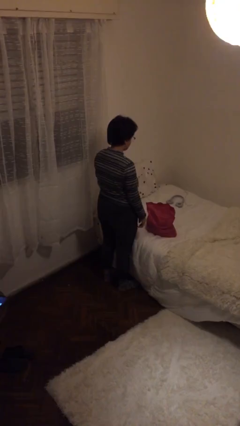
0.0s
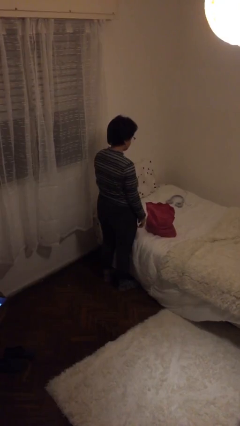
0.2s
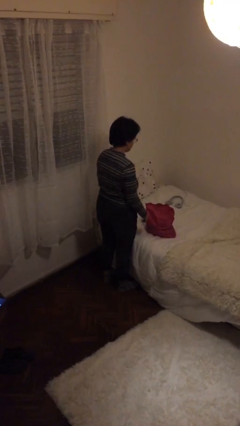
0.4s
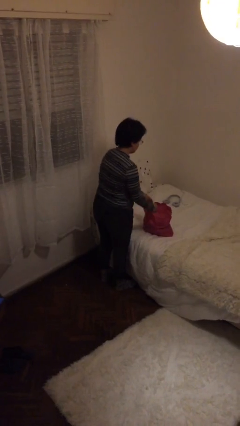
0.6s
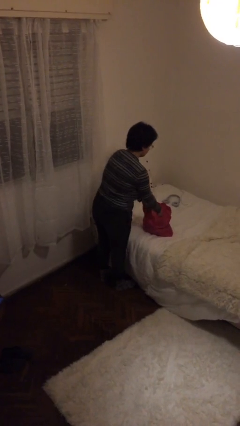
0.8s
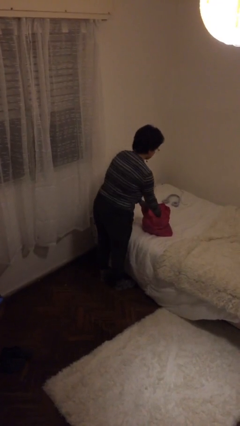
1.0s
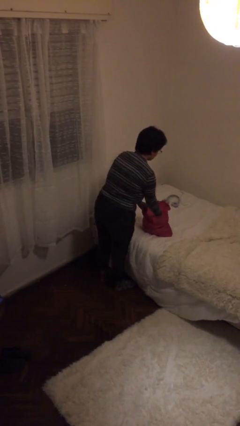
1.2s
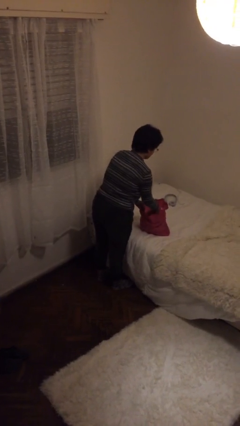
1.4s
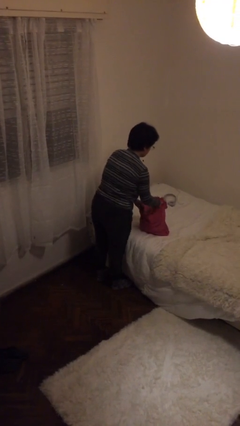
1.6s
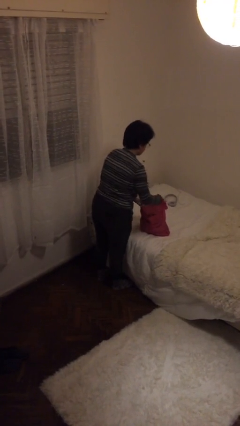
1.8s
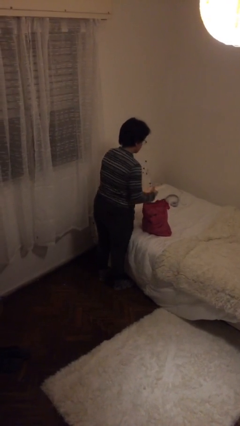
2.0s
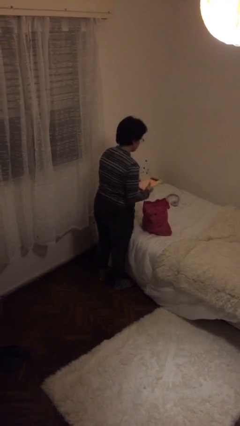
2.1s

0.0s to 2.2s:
person takes object from bag

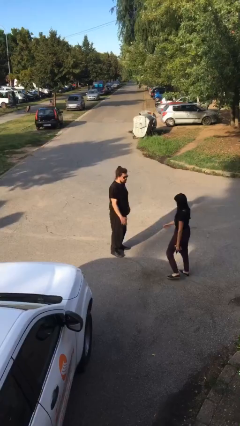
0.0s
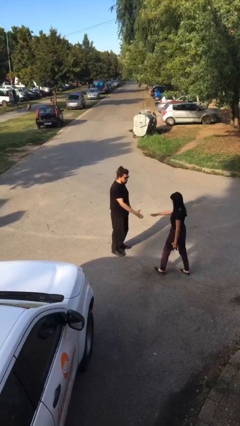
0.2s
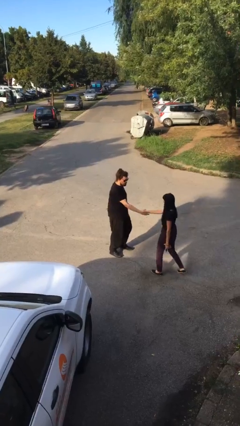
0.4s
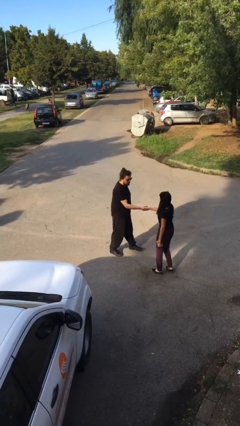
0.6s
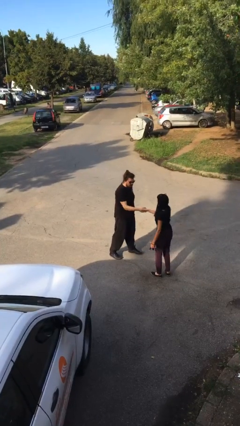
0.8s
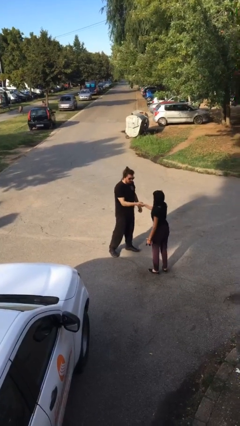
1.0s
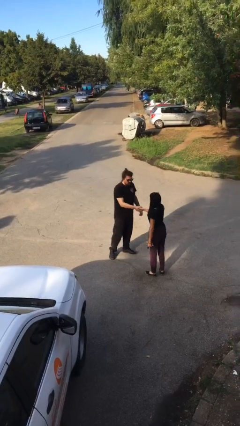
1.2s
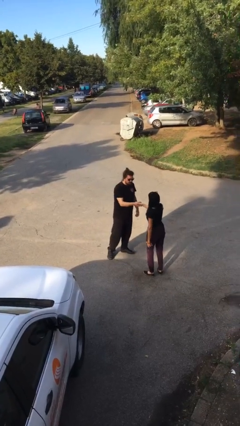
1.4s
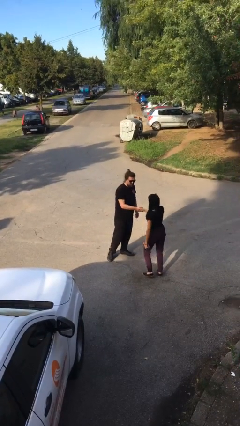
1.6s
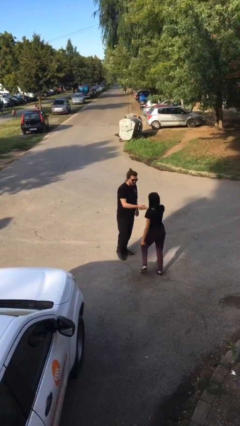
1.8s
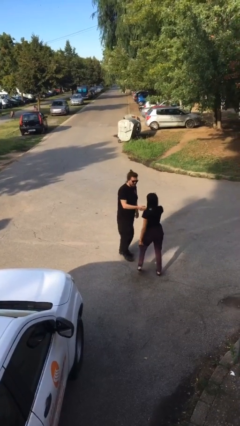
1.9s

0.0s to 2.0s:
person shakes hand

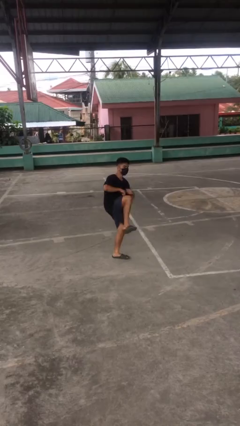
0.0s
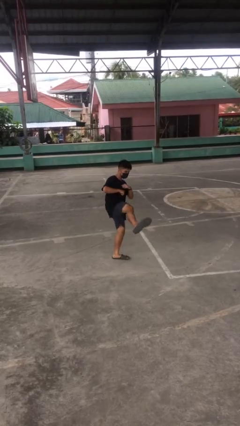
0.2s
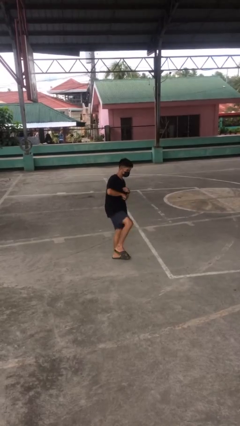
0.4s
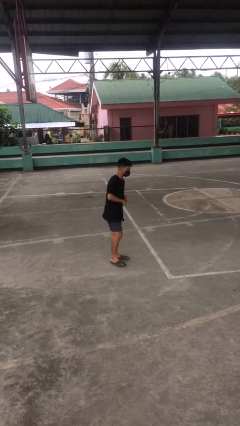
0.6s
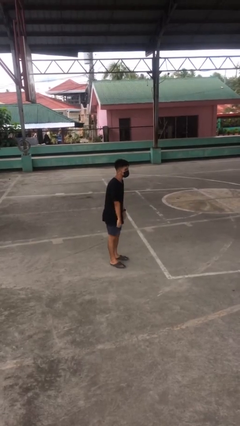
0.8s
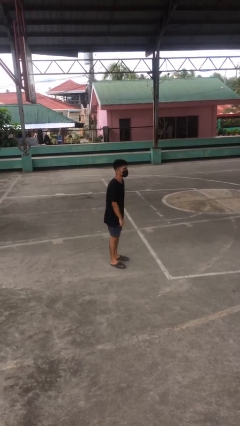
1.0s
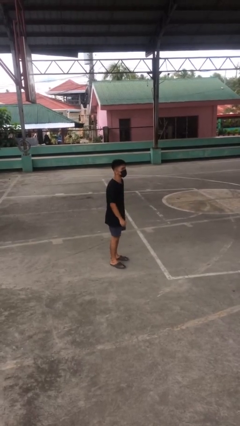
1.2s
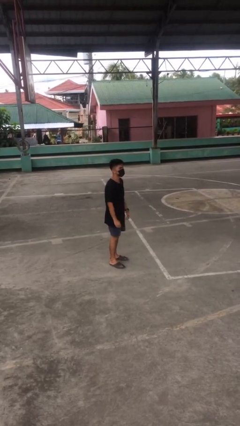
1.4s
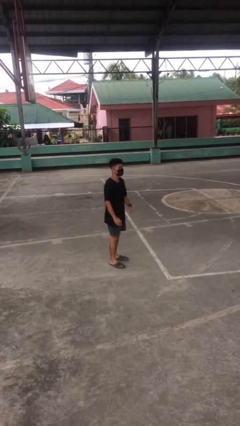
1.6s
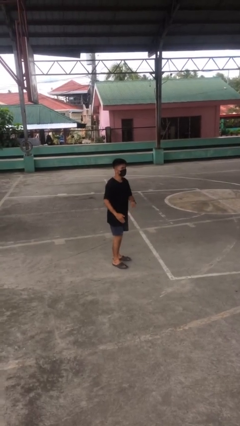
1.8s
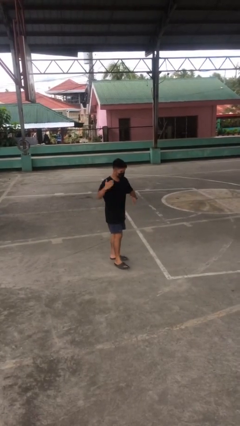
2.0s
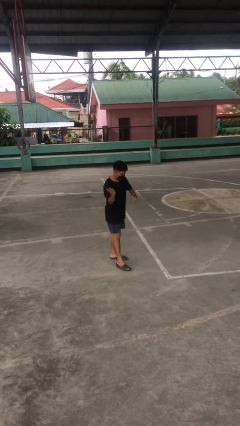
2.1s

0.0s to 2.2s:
person karate kicks

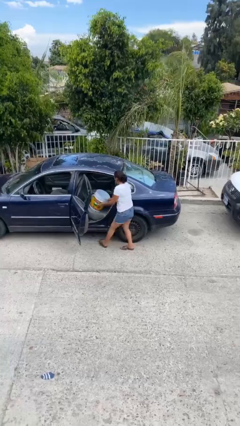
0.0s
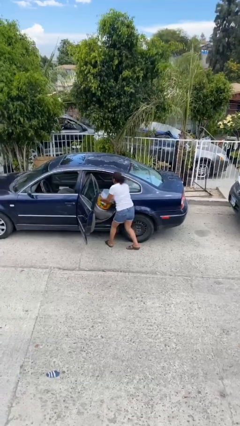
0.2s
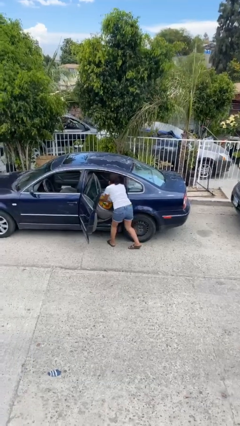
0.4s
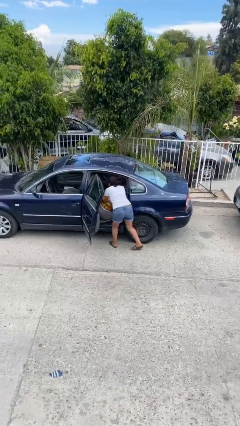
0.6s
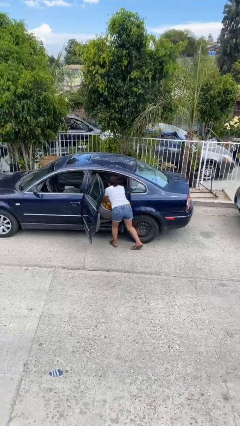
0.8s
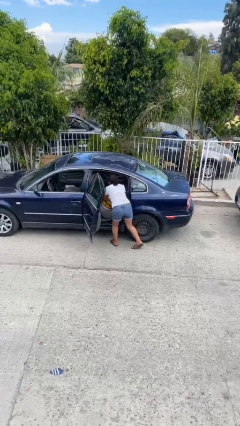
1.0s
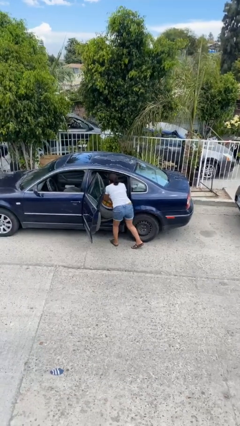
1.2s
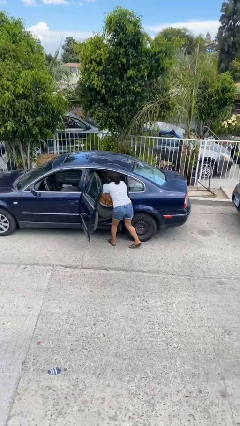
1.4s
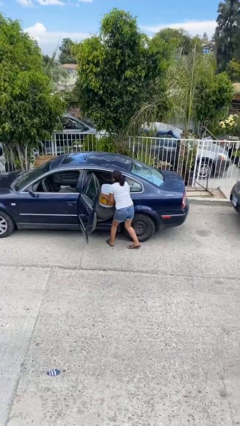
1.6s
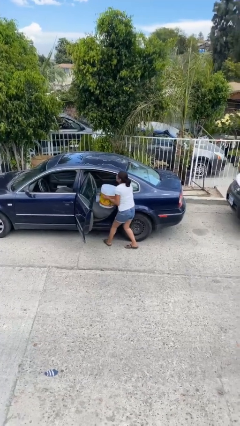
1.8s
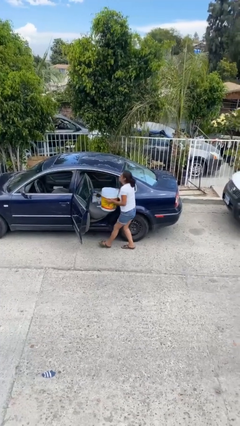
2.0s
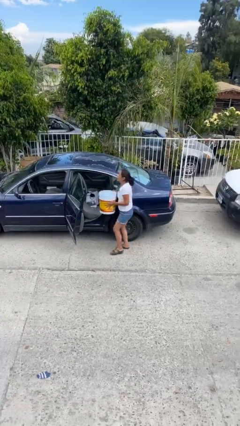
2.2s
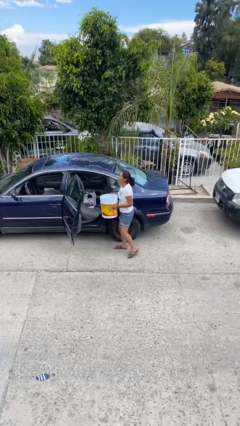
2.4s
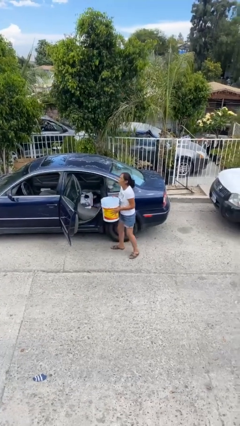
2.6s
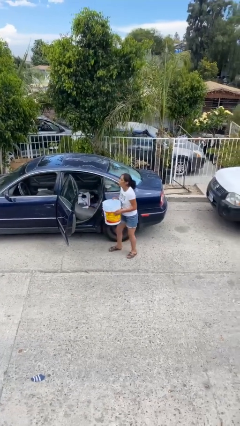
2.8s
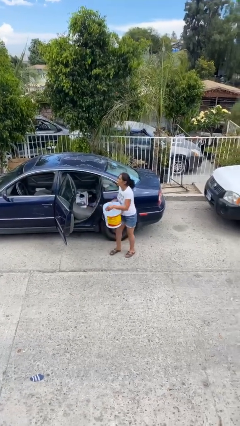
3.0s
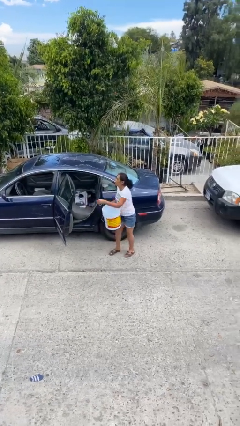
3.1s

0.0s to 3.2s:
person unloads car

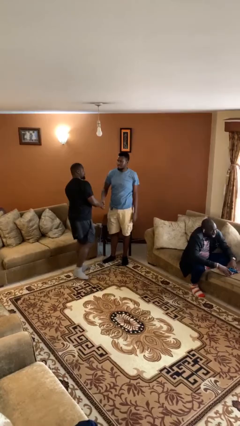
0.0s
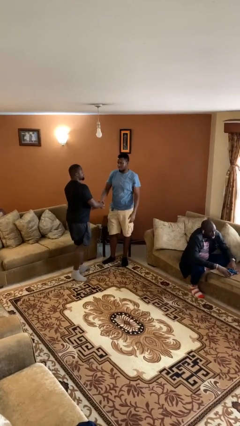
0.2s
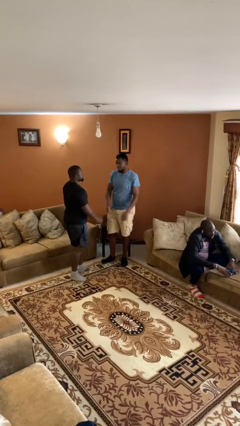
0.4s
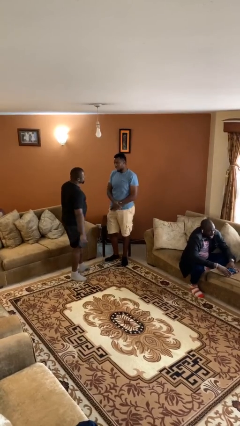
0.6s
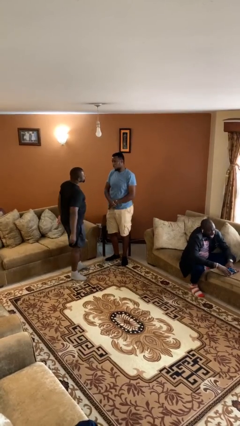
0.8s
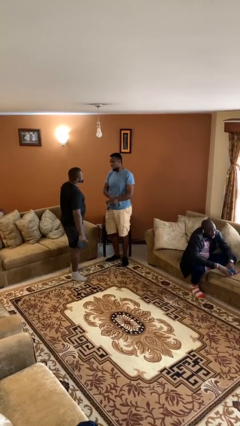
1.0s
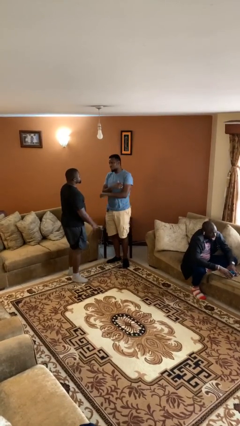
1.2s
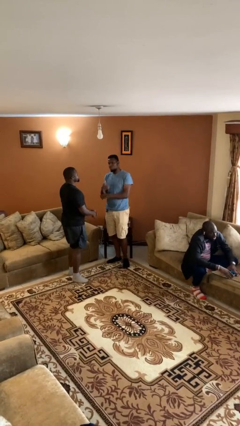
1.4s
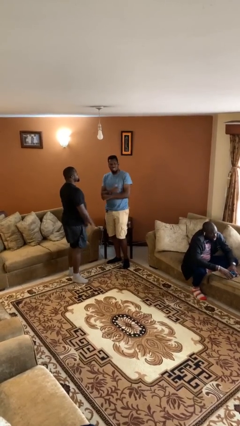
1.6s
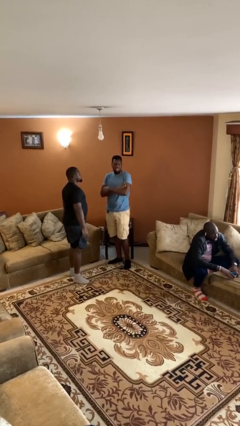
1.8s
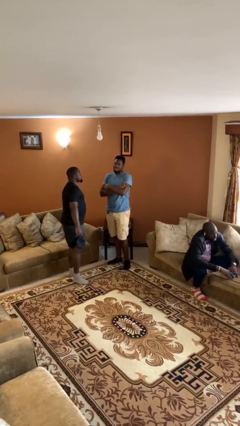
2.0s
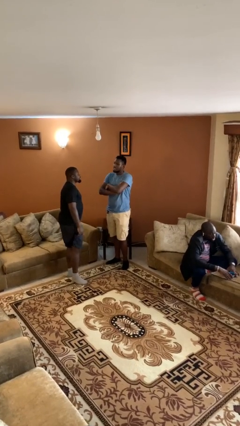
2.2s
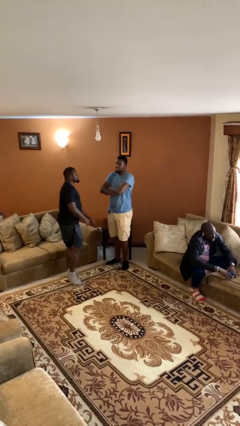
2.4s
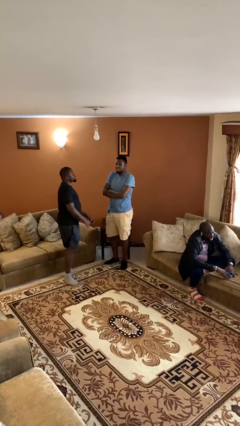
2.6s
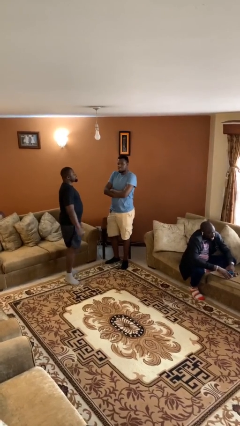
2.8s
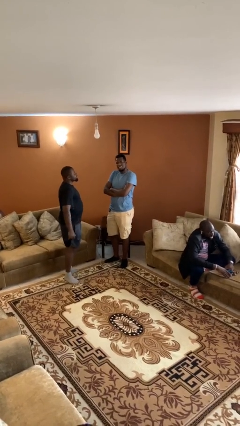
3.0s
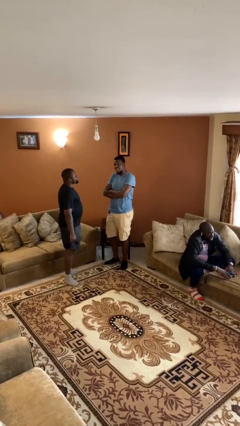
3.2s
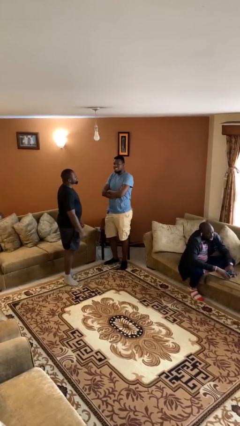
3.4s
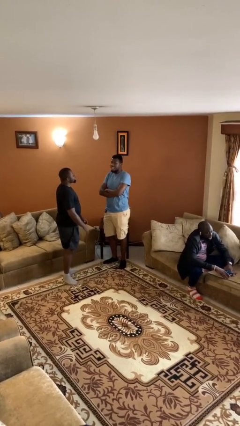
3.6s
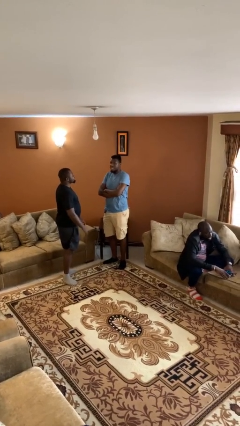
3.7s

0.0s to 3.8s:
person talks to person

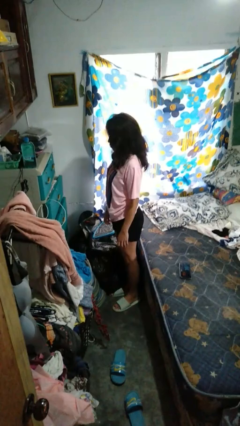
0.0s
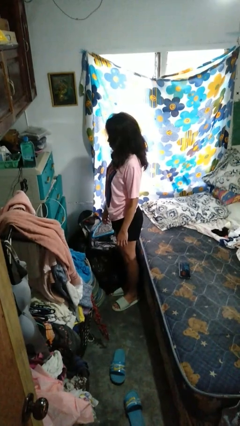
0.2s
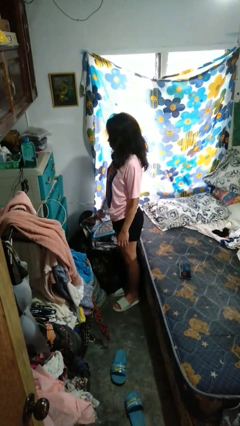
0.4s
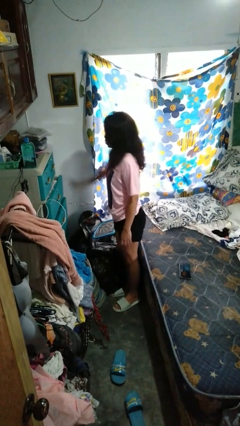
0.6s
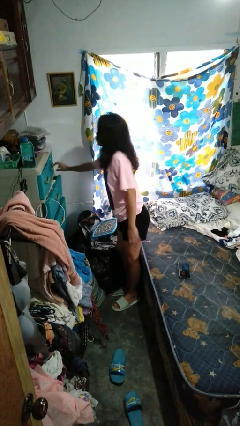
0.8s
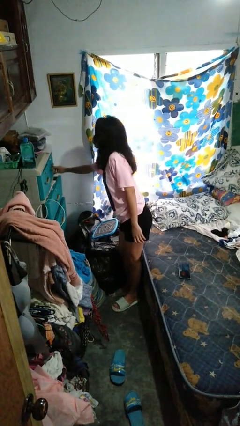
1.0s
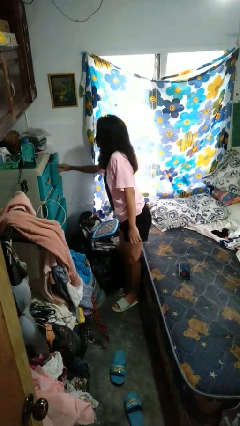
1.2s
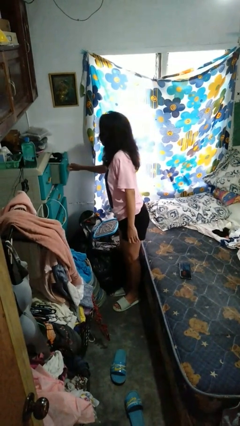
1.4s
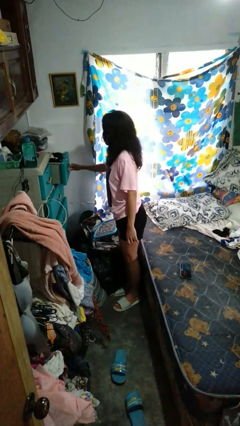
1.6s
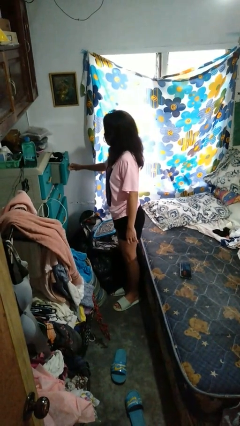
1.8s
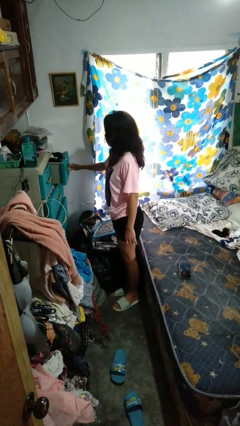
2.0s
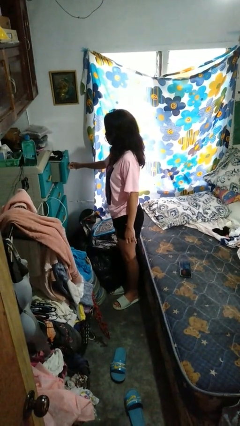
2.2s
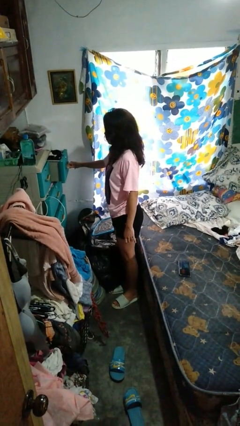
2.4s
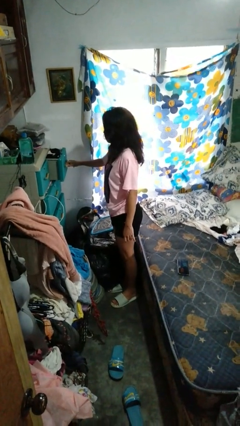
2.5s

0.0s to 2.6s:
person opens dresser drawer

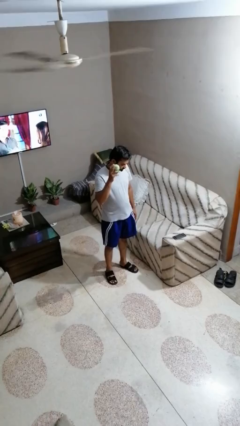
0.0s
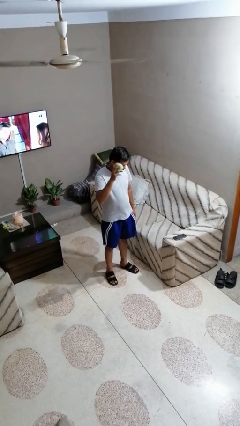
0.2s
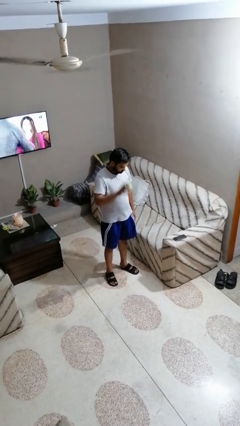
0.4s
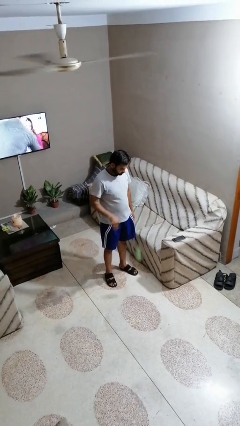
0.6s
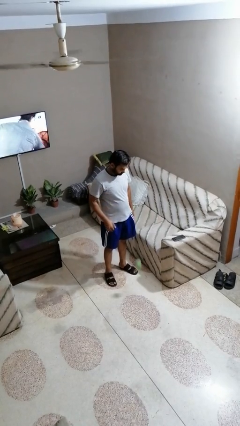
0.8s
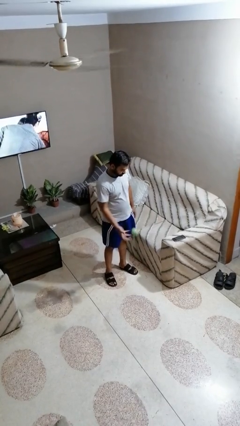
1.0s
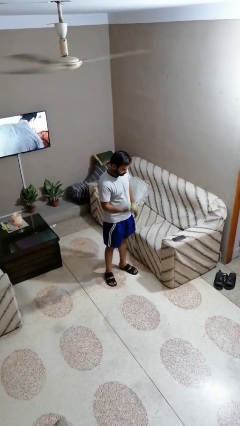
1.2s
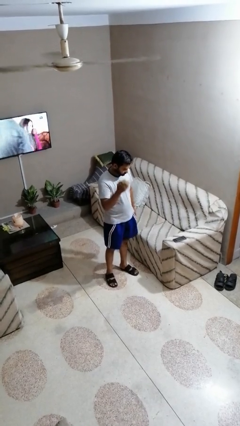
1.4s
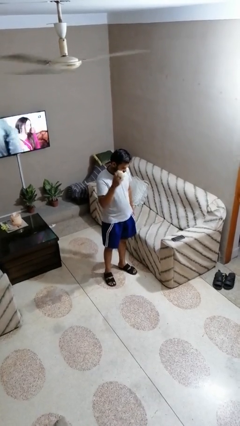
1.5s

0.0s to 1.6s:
person bounces ball on floor
